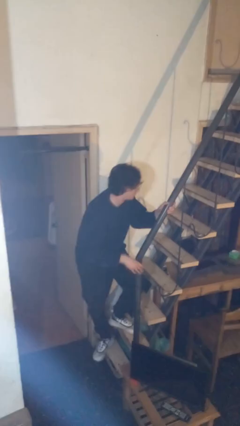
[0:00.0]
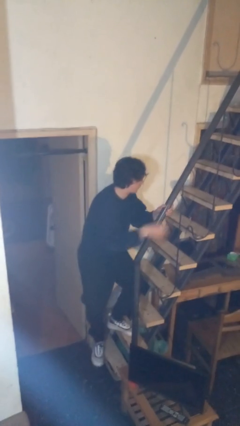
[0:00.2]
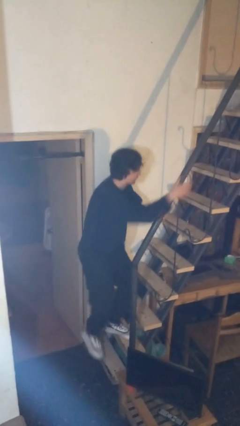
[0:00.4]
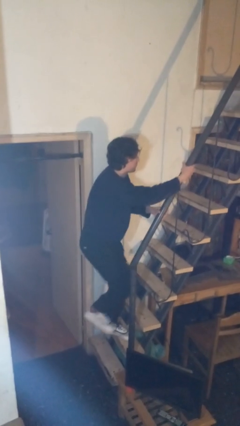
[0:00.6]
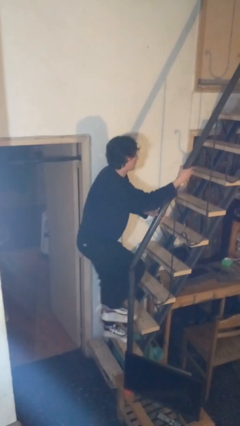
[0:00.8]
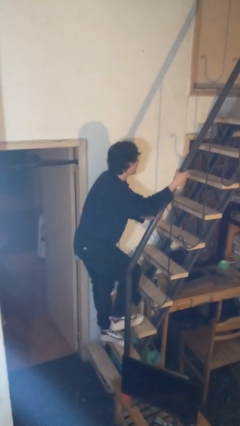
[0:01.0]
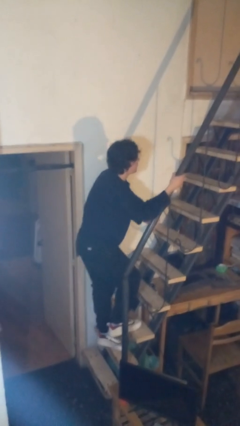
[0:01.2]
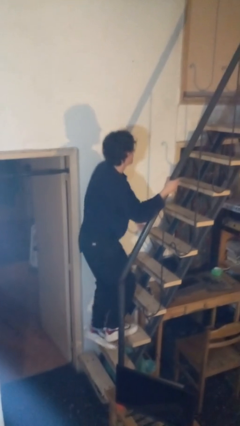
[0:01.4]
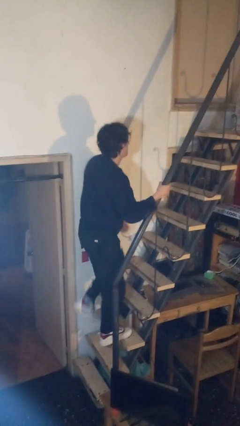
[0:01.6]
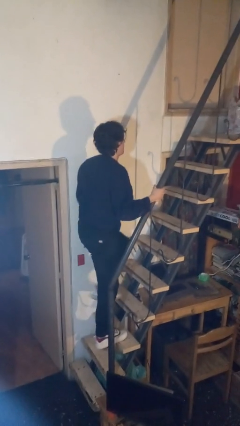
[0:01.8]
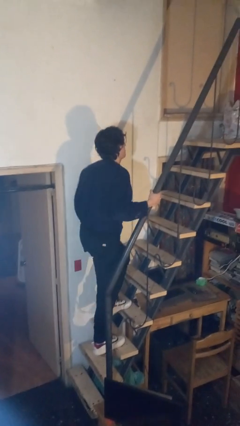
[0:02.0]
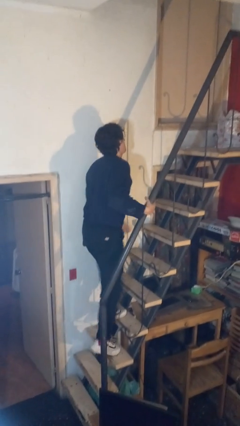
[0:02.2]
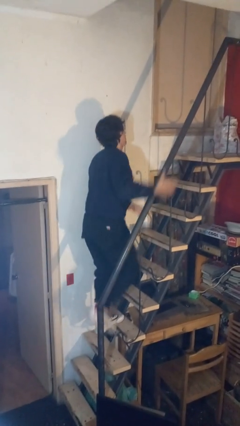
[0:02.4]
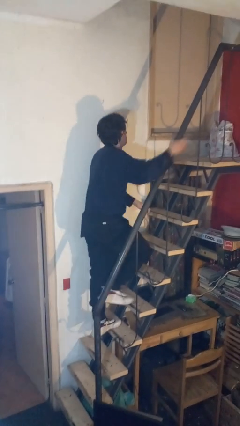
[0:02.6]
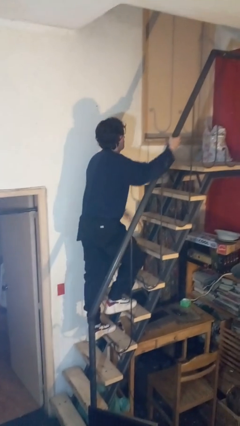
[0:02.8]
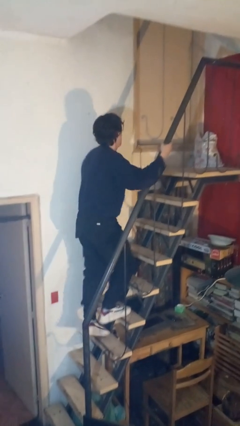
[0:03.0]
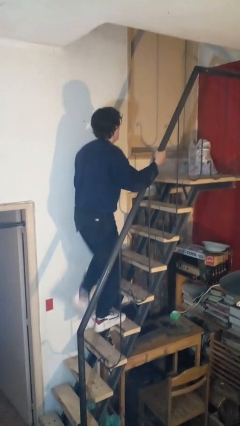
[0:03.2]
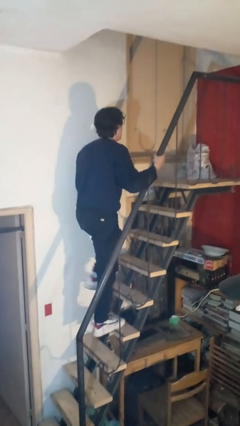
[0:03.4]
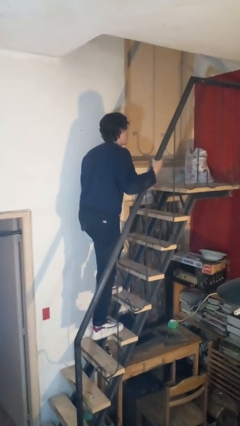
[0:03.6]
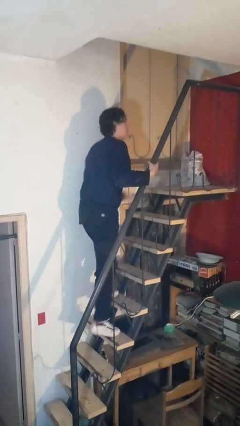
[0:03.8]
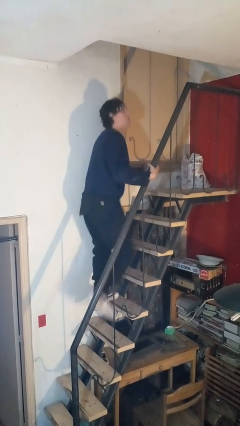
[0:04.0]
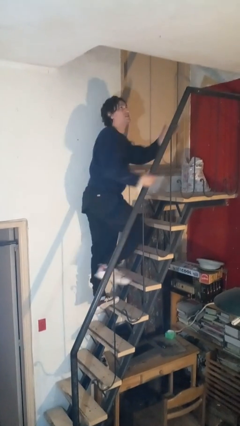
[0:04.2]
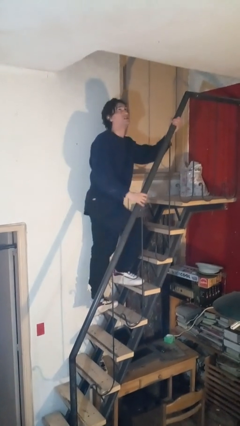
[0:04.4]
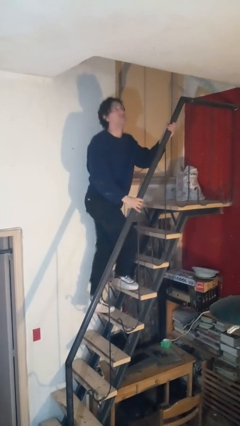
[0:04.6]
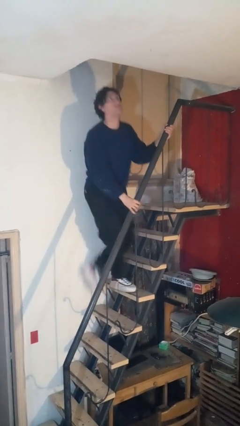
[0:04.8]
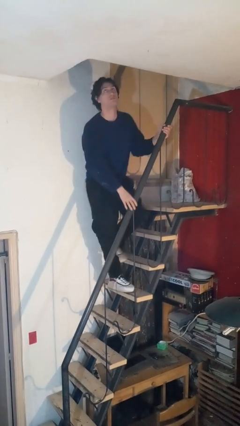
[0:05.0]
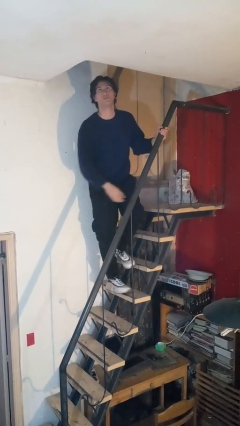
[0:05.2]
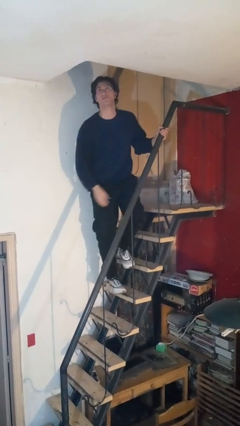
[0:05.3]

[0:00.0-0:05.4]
person climbs up stairs

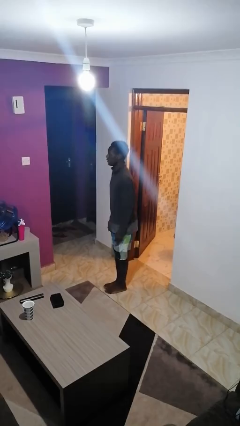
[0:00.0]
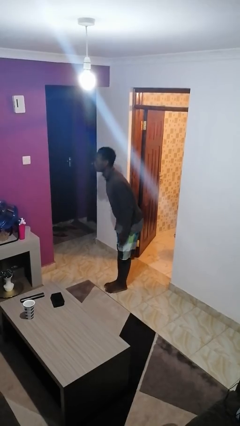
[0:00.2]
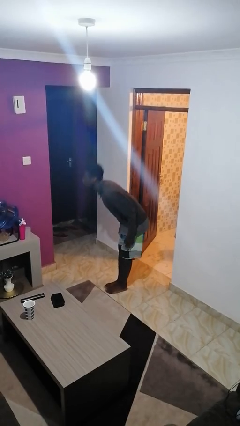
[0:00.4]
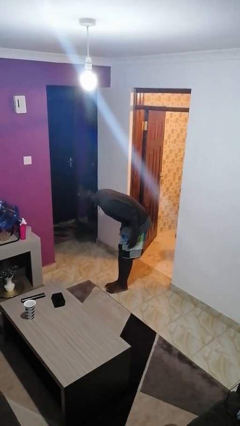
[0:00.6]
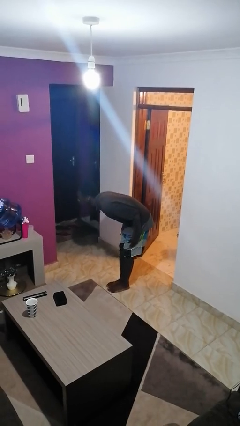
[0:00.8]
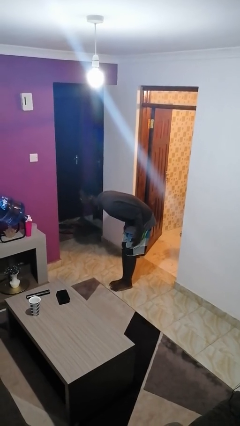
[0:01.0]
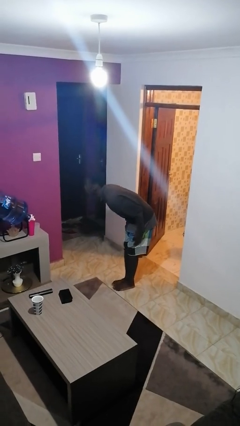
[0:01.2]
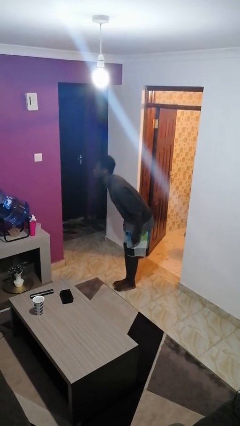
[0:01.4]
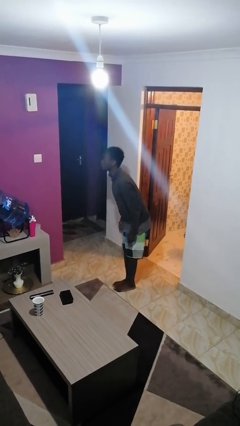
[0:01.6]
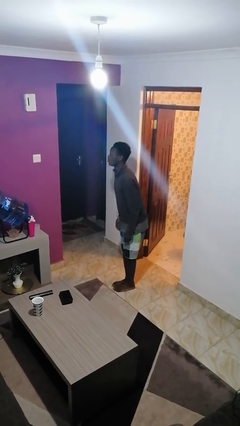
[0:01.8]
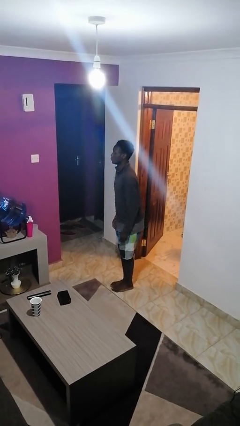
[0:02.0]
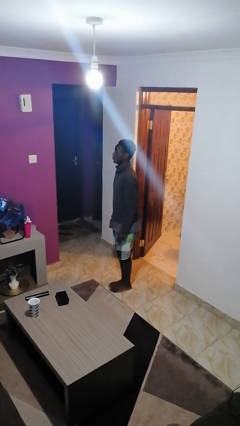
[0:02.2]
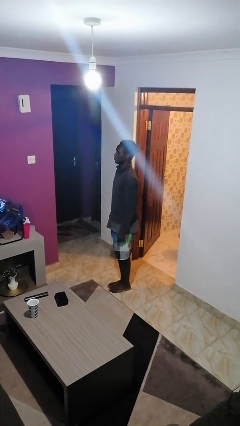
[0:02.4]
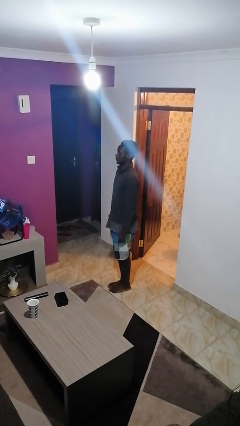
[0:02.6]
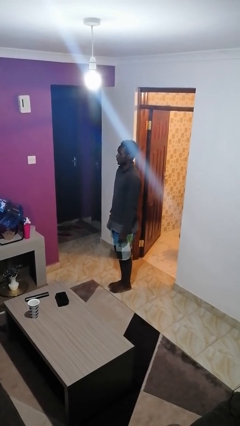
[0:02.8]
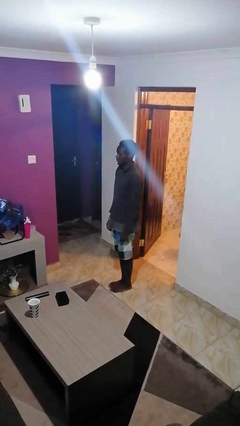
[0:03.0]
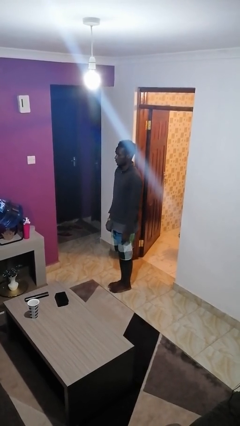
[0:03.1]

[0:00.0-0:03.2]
person bows

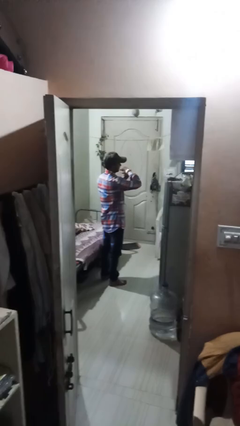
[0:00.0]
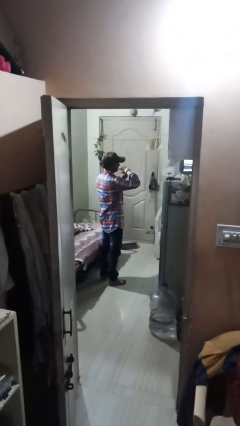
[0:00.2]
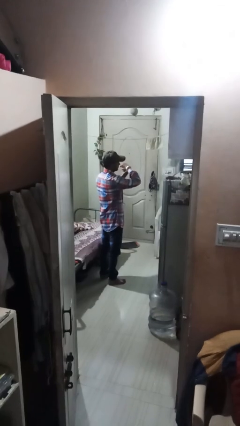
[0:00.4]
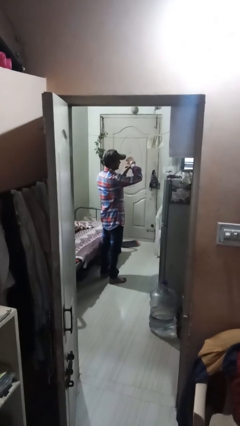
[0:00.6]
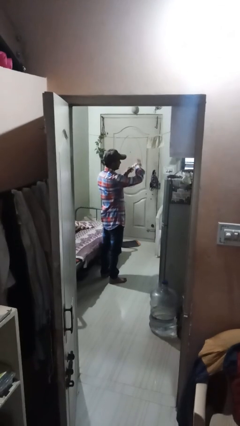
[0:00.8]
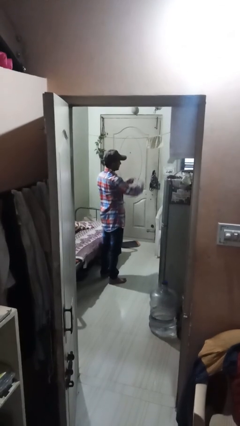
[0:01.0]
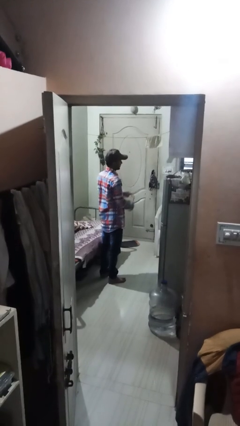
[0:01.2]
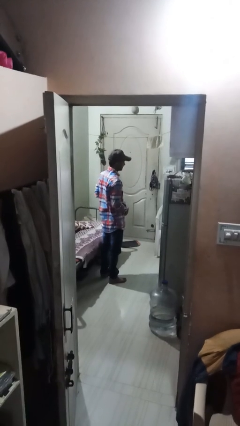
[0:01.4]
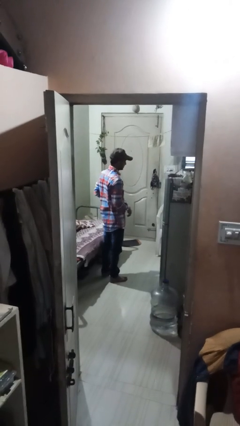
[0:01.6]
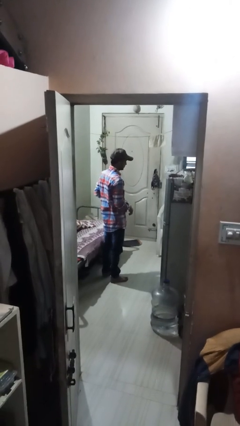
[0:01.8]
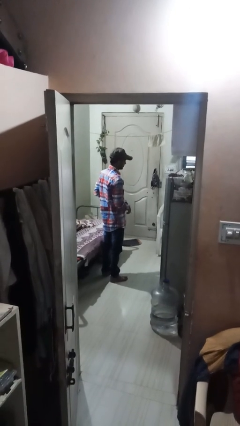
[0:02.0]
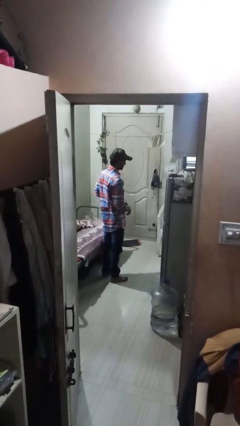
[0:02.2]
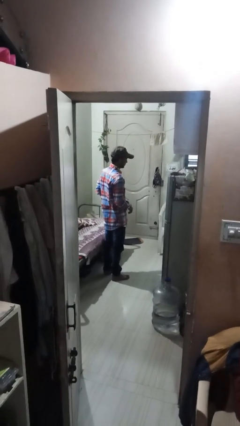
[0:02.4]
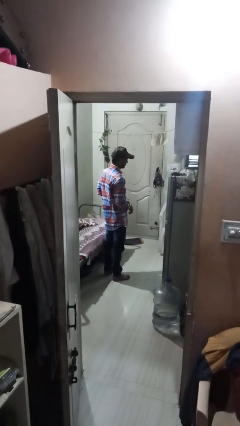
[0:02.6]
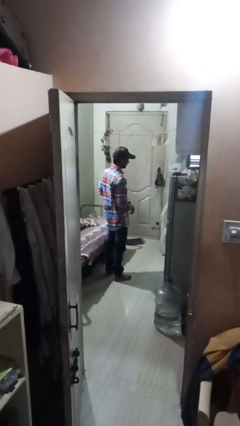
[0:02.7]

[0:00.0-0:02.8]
person takes off wristwatch

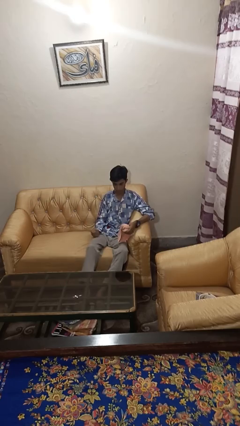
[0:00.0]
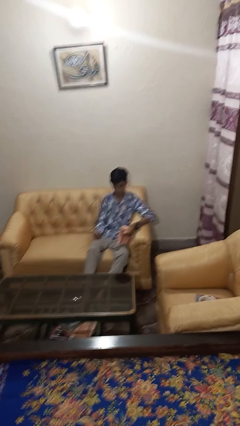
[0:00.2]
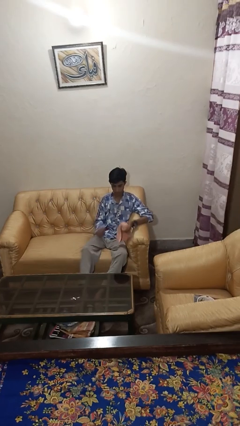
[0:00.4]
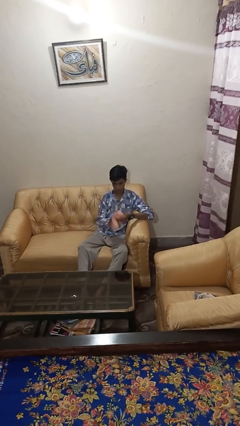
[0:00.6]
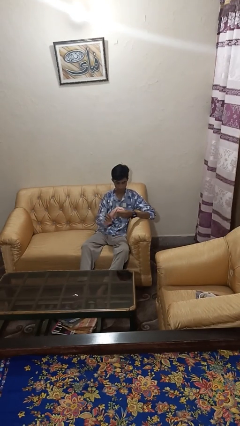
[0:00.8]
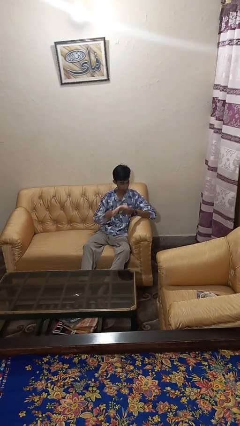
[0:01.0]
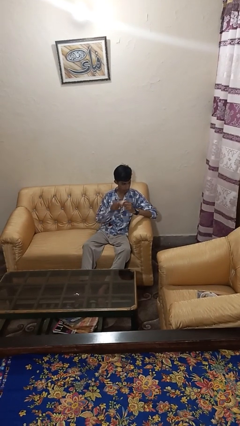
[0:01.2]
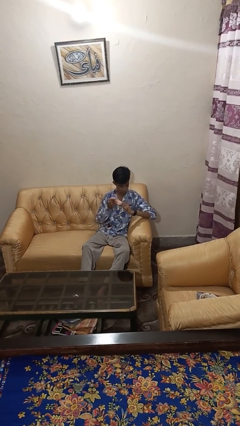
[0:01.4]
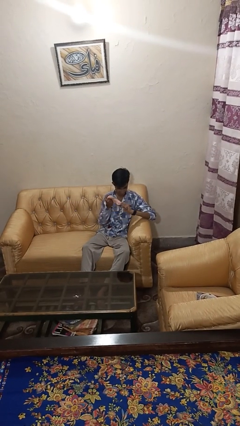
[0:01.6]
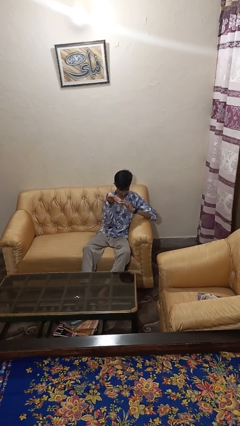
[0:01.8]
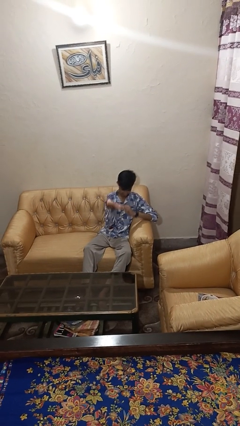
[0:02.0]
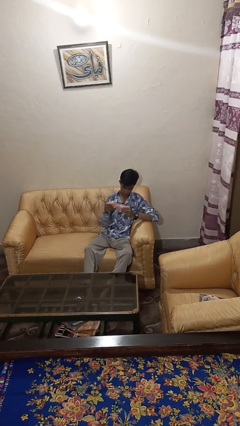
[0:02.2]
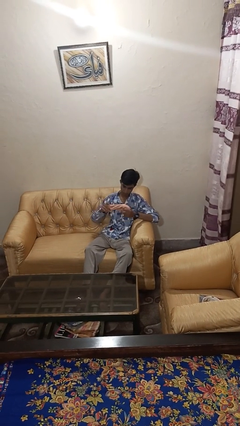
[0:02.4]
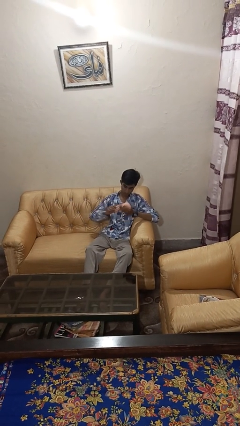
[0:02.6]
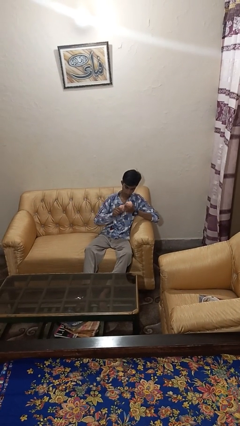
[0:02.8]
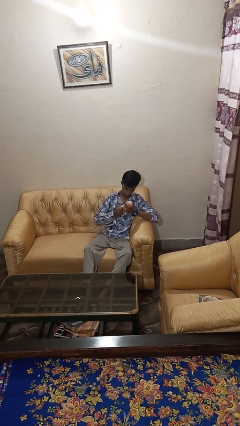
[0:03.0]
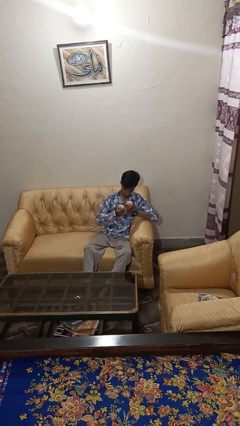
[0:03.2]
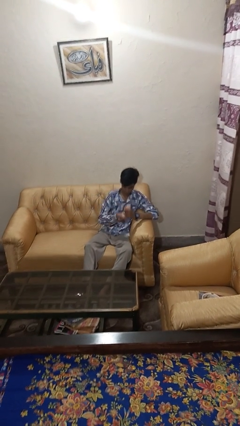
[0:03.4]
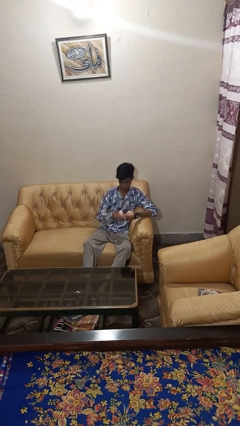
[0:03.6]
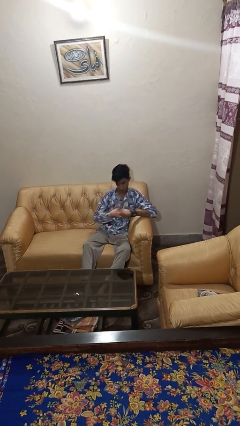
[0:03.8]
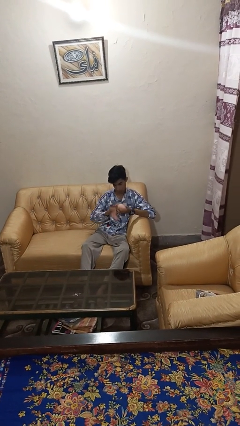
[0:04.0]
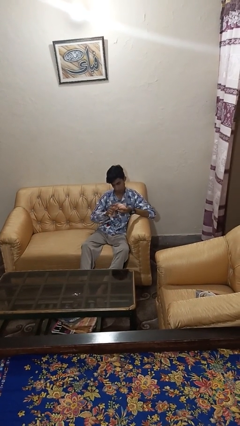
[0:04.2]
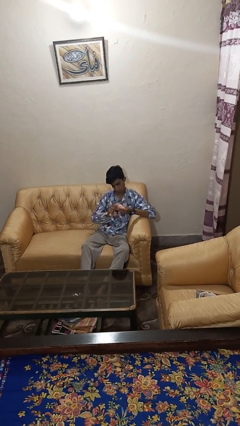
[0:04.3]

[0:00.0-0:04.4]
person squeezes object

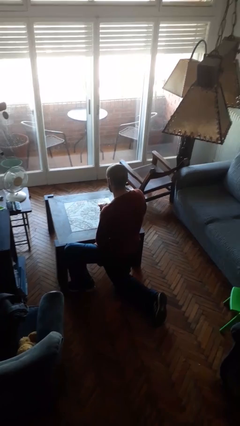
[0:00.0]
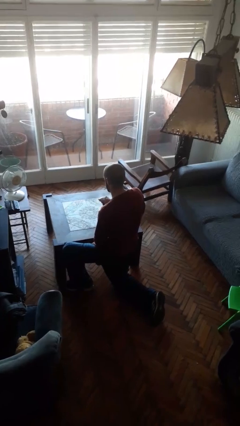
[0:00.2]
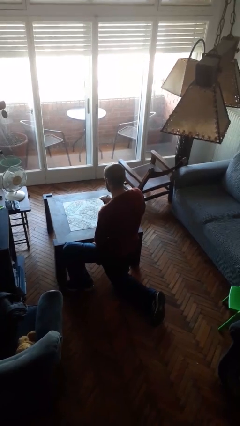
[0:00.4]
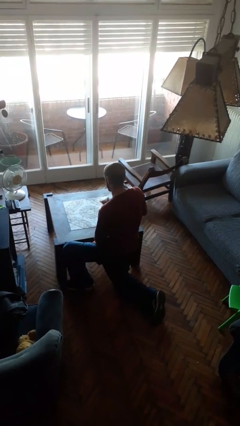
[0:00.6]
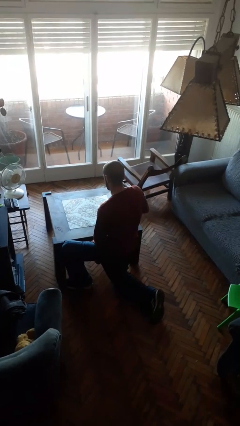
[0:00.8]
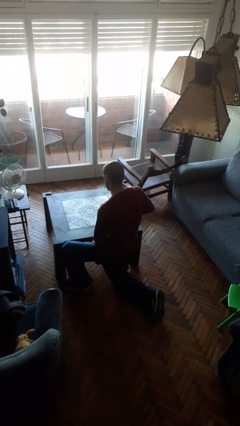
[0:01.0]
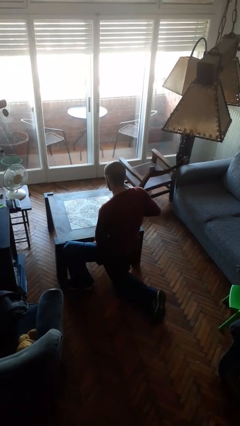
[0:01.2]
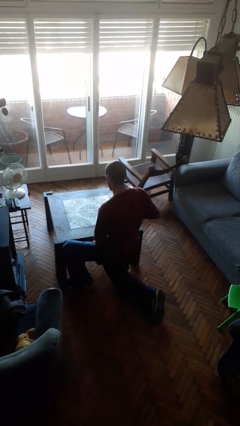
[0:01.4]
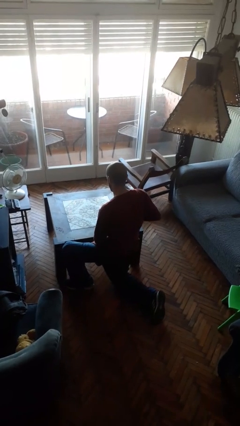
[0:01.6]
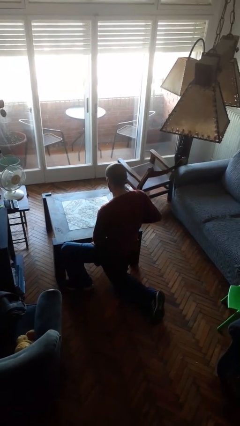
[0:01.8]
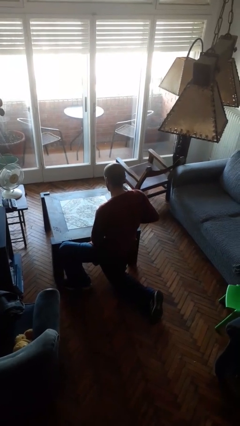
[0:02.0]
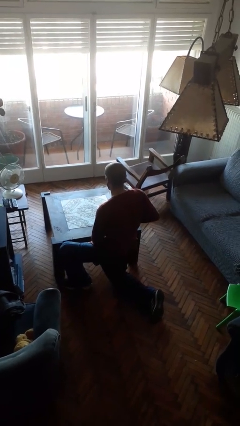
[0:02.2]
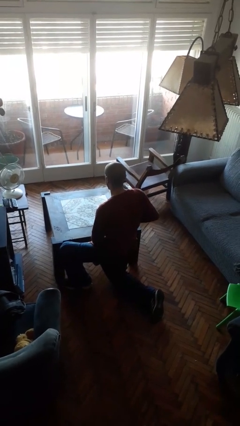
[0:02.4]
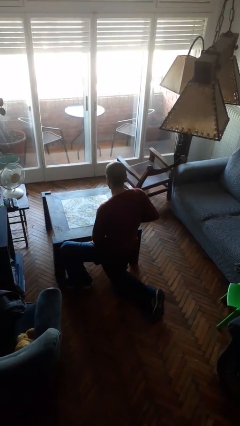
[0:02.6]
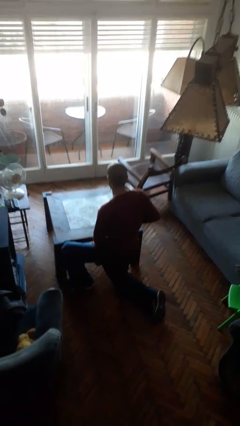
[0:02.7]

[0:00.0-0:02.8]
person sprays from bottle
